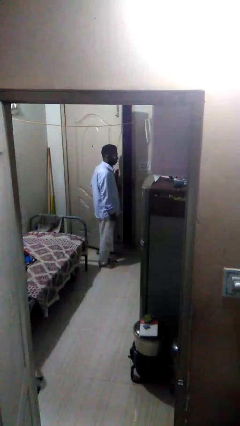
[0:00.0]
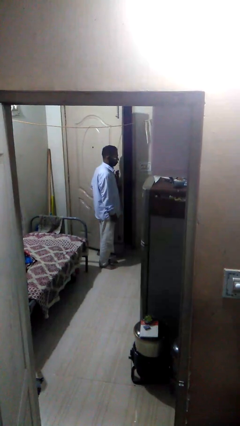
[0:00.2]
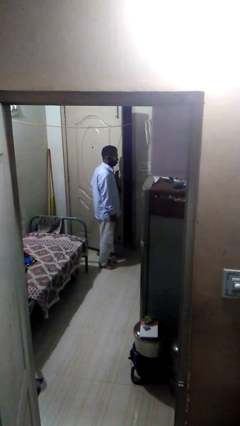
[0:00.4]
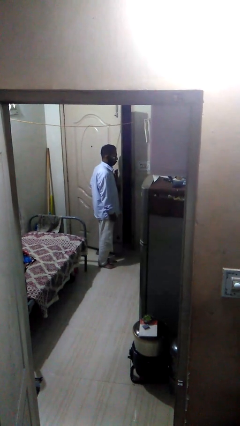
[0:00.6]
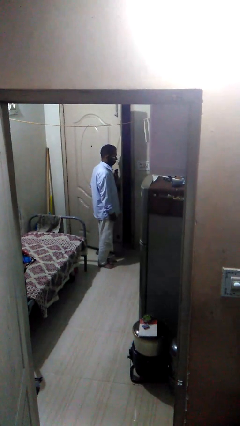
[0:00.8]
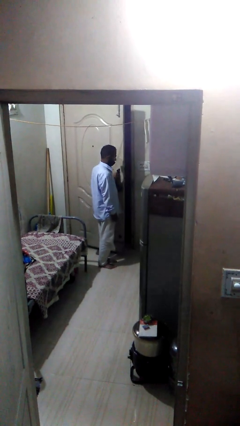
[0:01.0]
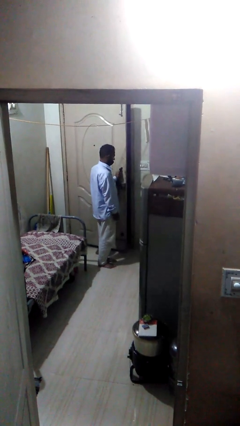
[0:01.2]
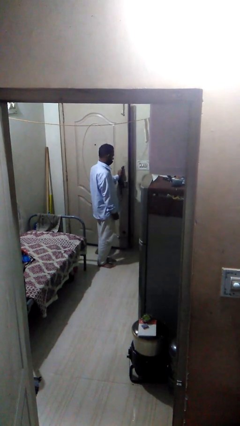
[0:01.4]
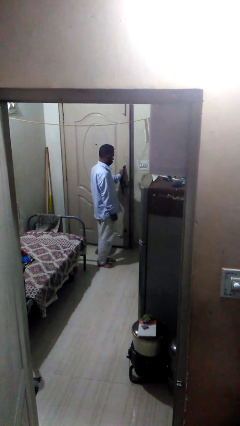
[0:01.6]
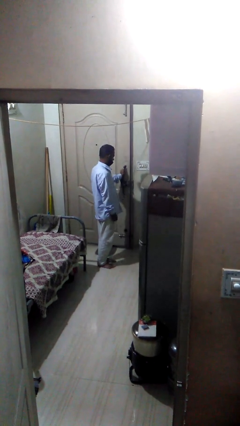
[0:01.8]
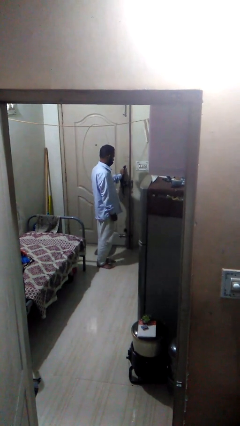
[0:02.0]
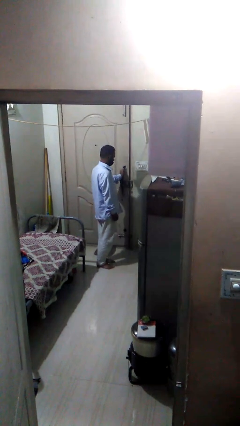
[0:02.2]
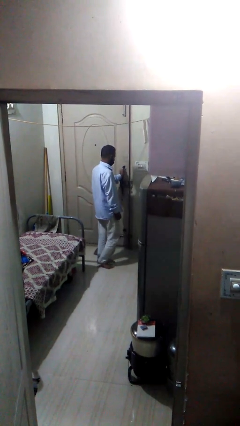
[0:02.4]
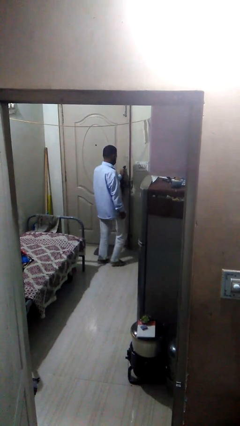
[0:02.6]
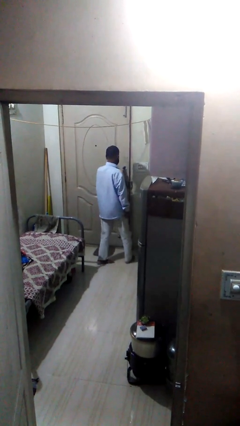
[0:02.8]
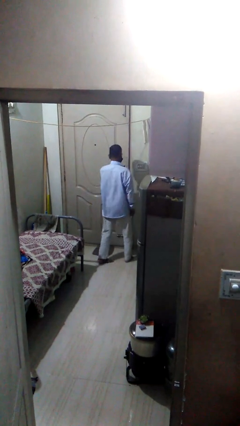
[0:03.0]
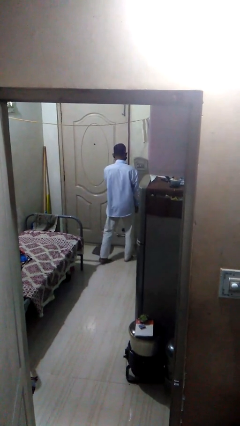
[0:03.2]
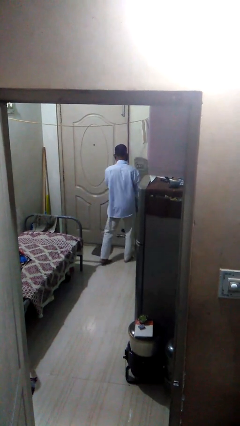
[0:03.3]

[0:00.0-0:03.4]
person closes facility door

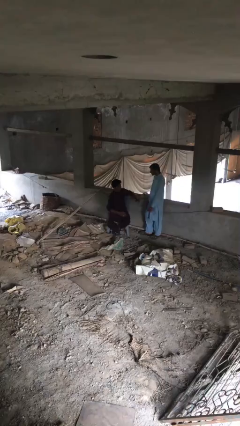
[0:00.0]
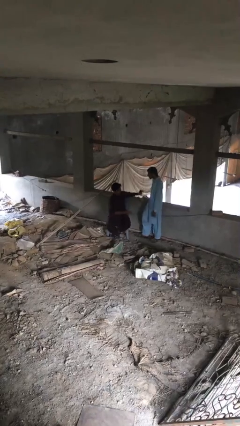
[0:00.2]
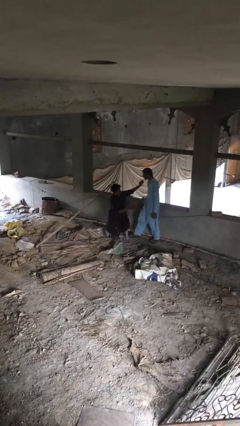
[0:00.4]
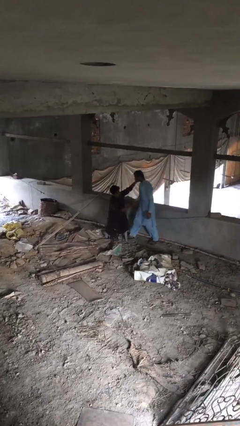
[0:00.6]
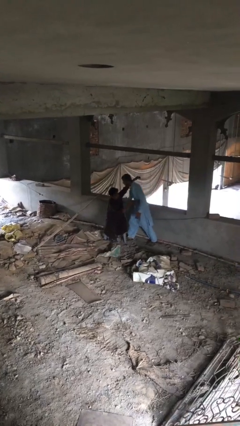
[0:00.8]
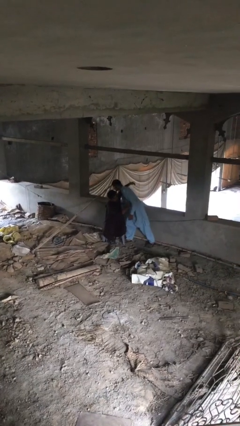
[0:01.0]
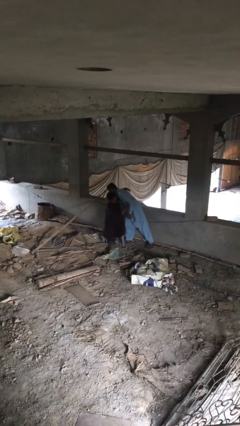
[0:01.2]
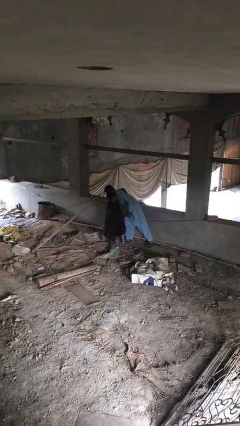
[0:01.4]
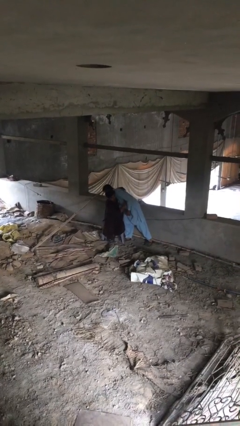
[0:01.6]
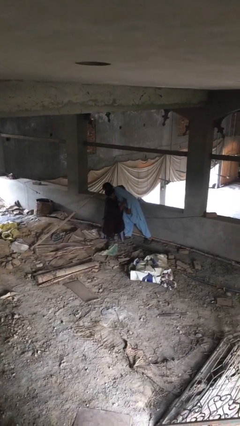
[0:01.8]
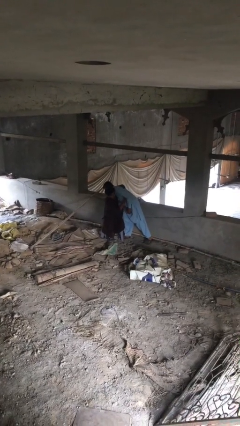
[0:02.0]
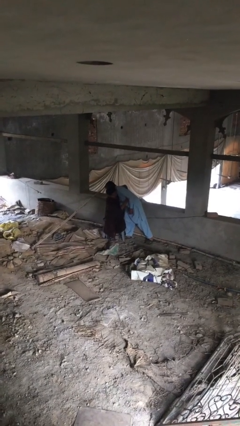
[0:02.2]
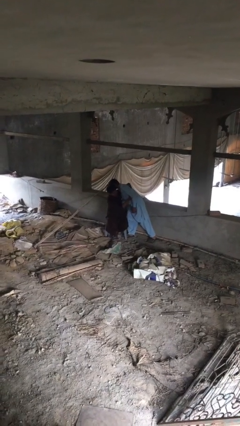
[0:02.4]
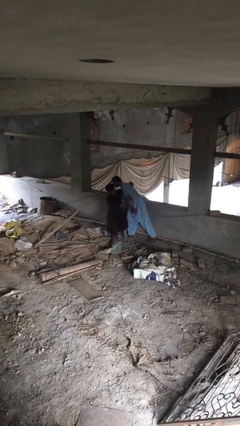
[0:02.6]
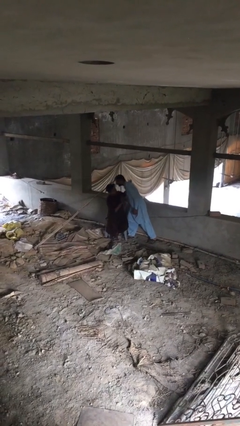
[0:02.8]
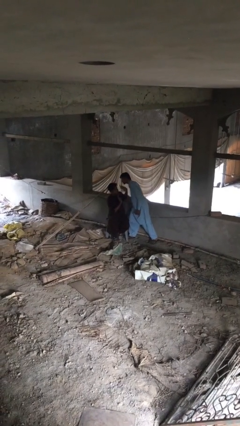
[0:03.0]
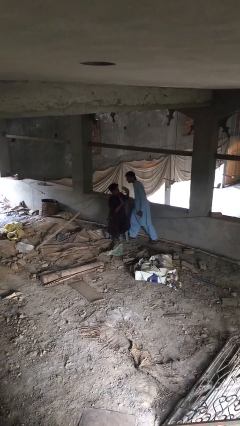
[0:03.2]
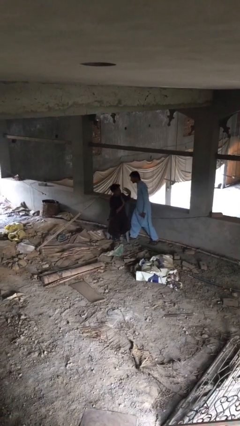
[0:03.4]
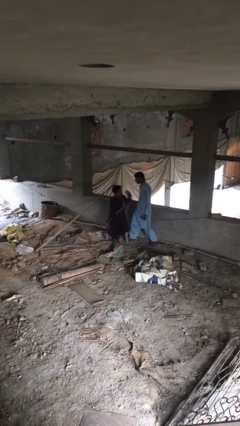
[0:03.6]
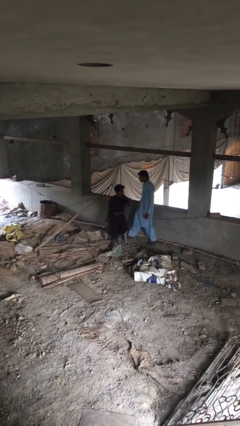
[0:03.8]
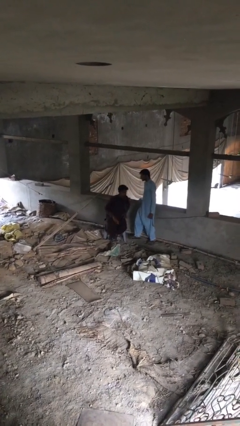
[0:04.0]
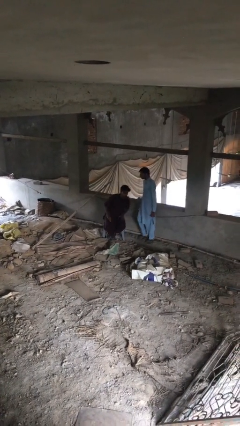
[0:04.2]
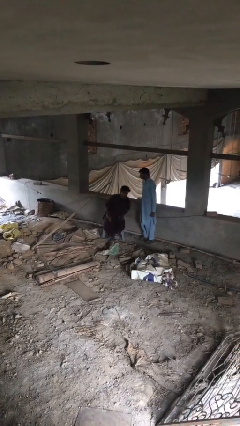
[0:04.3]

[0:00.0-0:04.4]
person embraces person

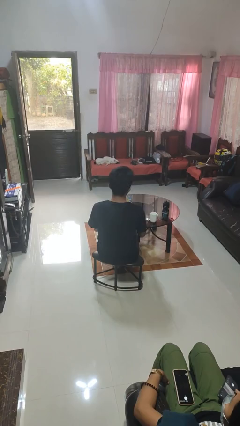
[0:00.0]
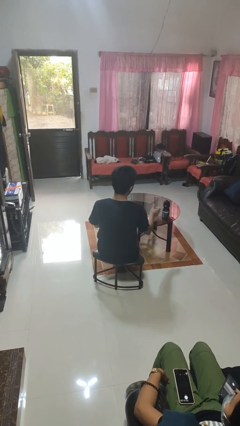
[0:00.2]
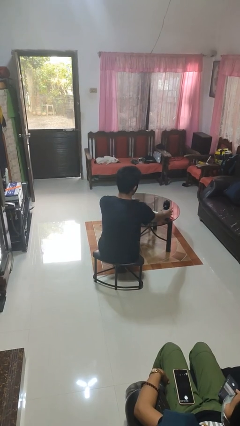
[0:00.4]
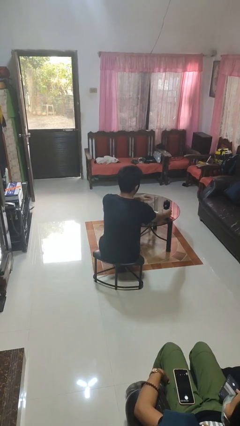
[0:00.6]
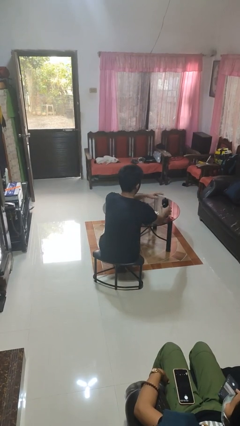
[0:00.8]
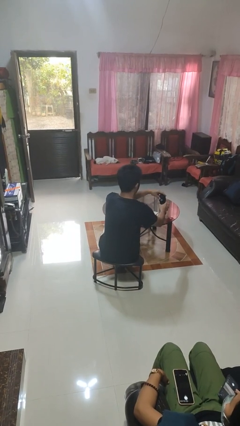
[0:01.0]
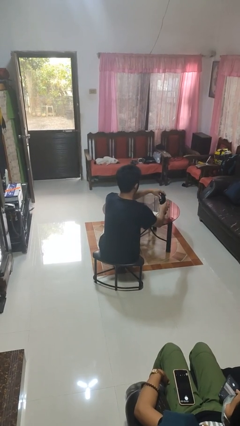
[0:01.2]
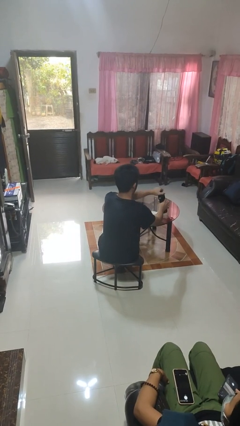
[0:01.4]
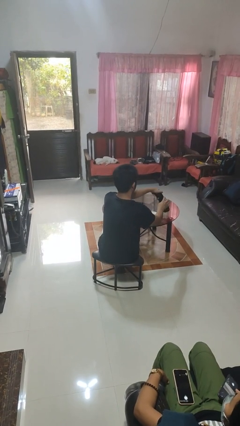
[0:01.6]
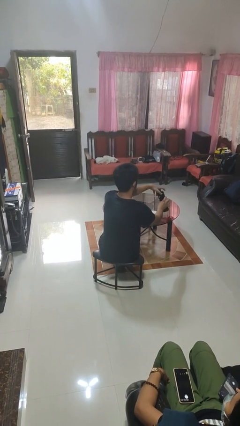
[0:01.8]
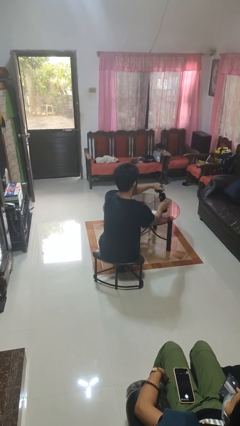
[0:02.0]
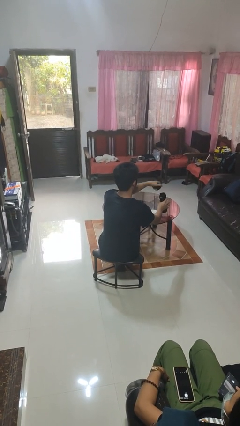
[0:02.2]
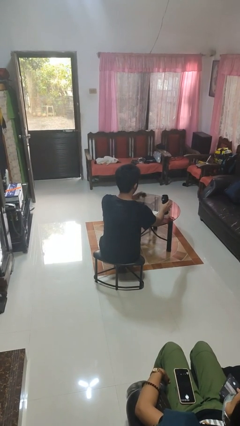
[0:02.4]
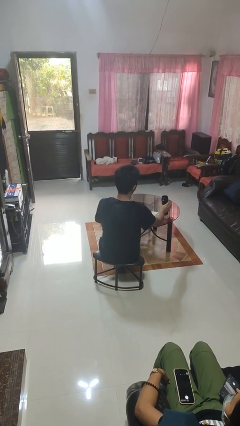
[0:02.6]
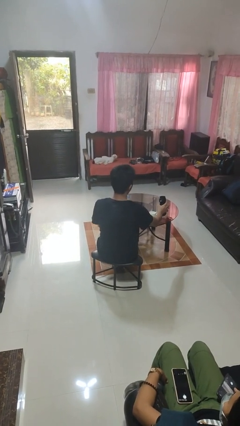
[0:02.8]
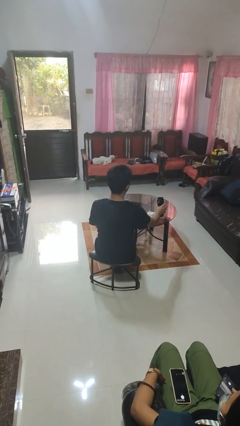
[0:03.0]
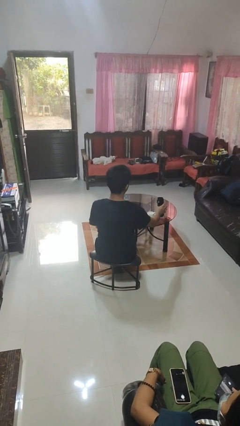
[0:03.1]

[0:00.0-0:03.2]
person unscrews lid from bottle

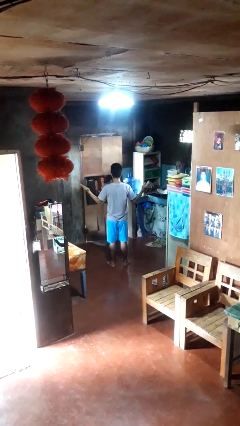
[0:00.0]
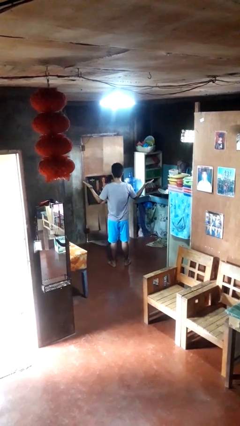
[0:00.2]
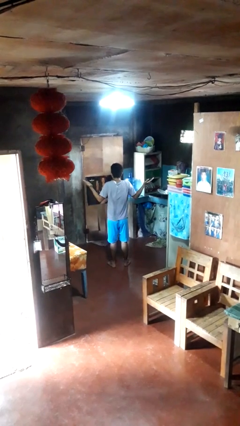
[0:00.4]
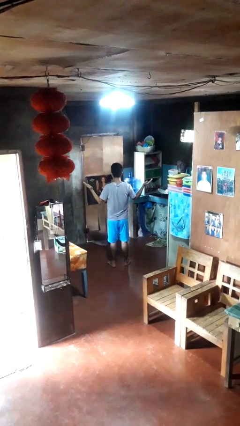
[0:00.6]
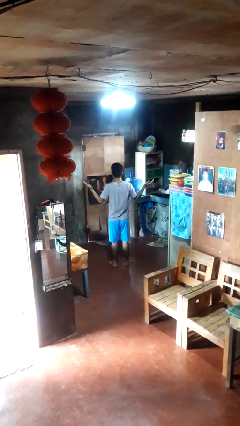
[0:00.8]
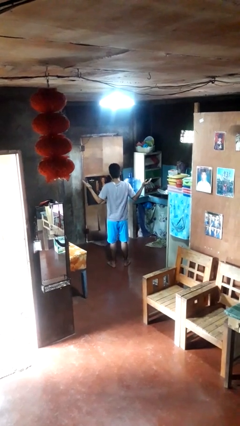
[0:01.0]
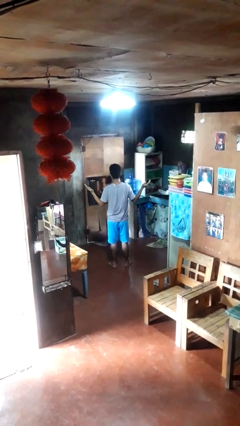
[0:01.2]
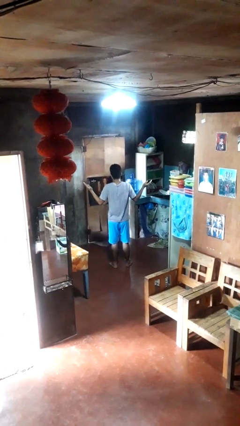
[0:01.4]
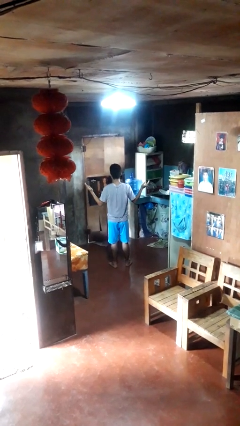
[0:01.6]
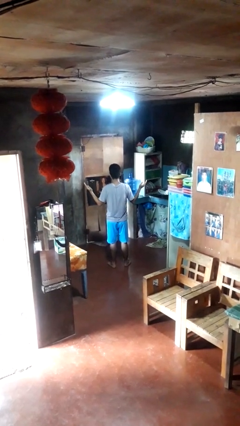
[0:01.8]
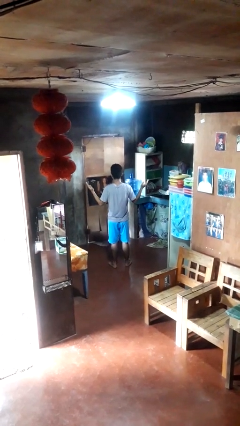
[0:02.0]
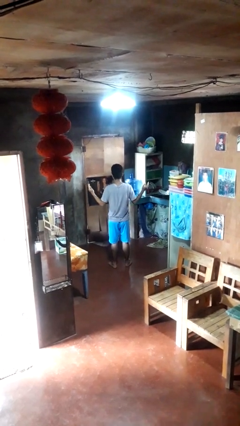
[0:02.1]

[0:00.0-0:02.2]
person shrugs

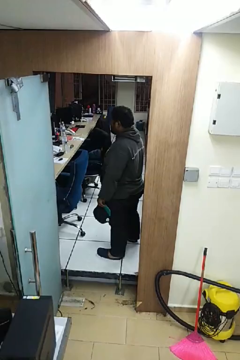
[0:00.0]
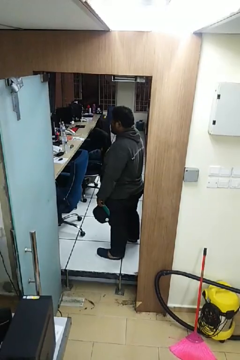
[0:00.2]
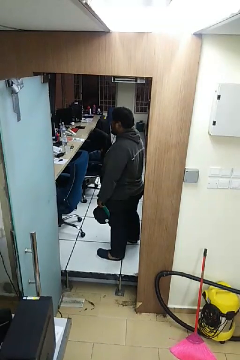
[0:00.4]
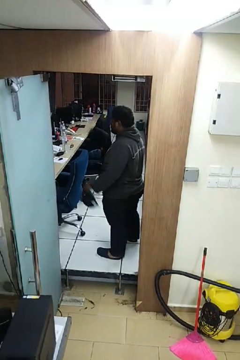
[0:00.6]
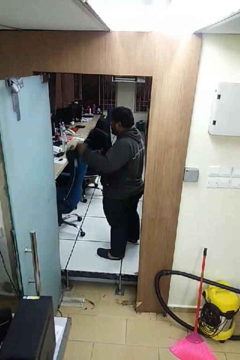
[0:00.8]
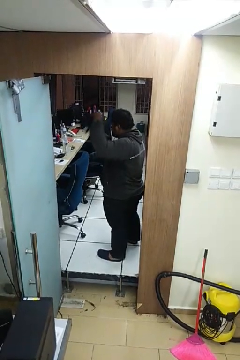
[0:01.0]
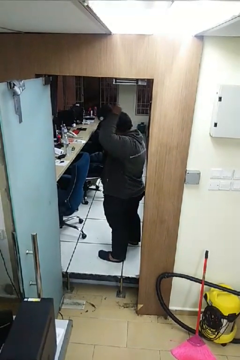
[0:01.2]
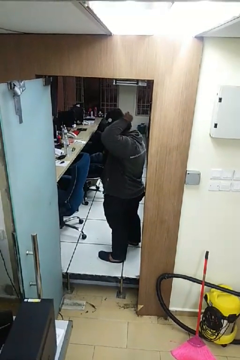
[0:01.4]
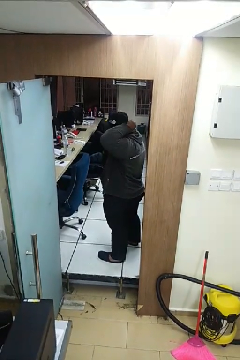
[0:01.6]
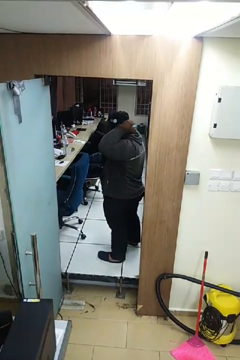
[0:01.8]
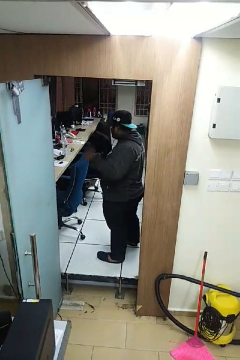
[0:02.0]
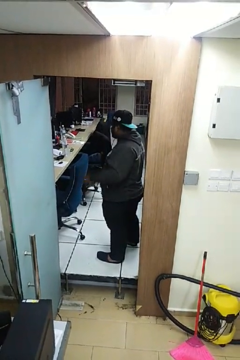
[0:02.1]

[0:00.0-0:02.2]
person puts on hat

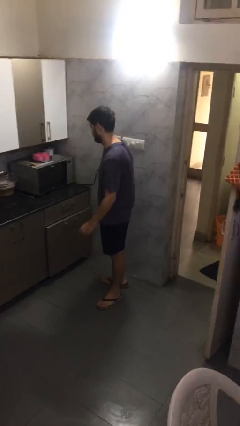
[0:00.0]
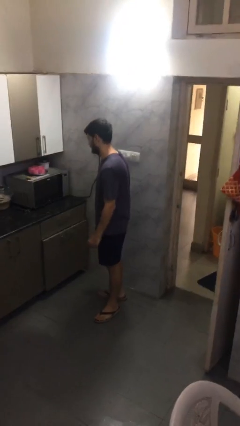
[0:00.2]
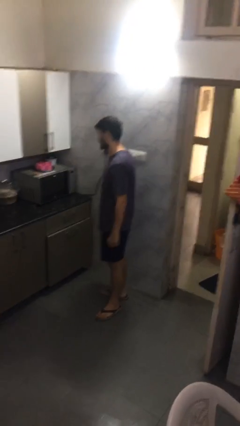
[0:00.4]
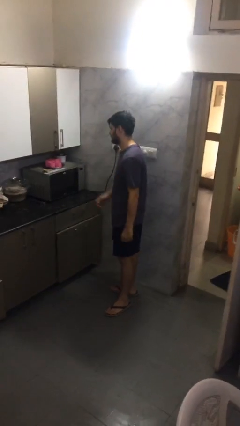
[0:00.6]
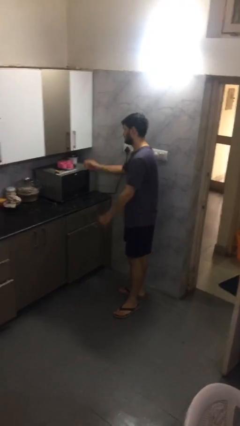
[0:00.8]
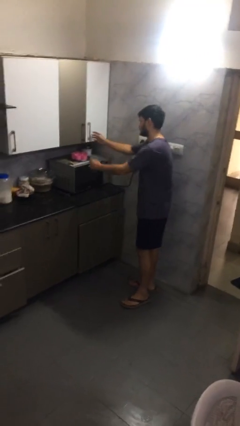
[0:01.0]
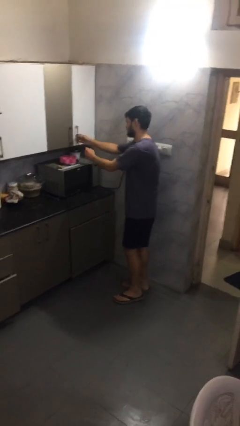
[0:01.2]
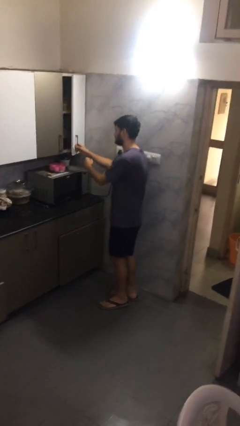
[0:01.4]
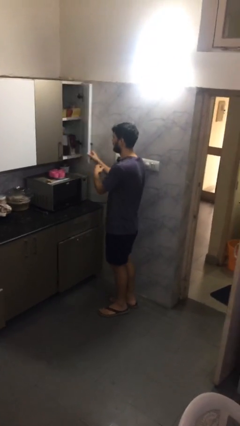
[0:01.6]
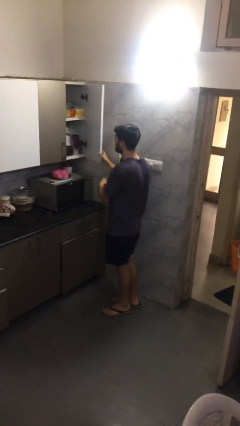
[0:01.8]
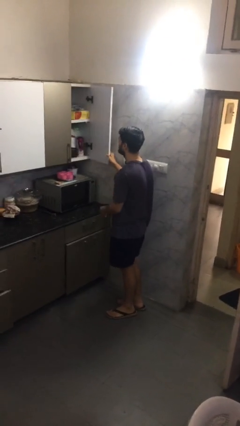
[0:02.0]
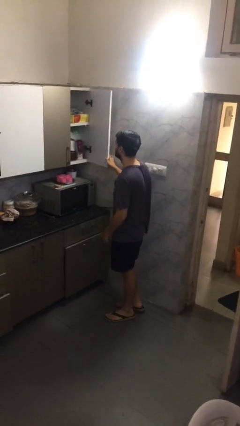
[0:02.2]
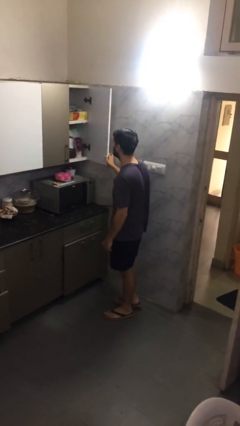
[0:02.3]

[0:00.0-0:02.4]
person opens cabinet
